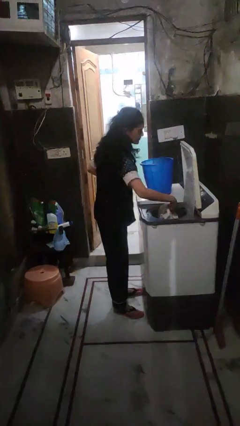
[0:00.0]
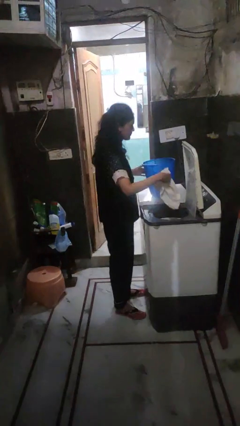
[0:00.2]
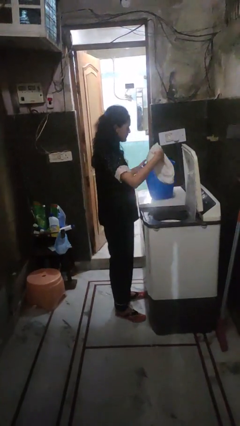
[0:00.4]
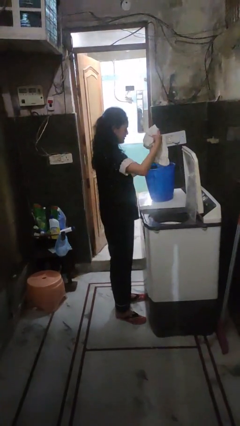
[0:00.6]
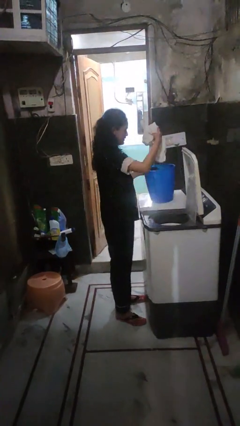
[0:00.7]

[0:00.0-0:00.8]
person unloads dryer

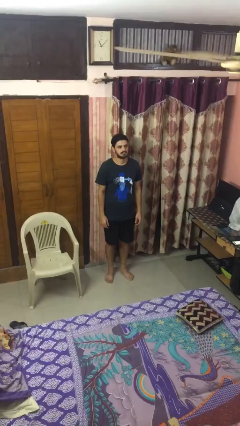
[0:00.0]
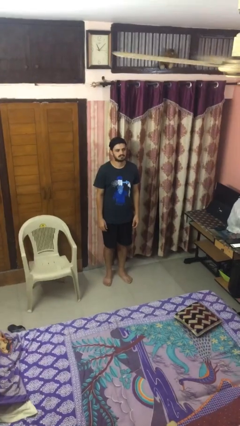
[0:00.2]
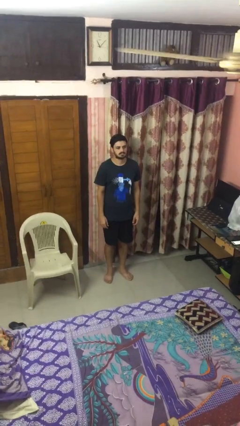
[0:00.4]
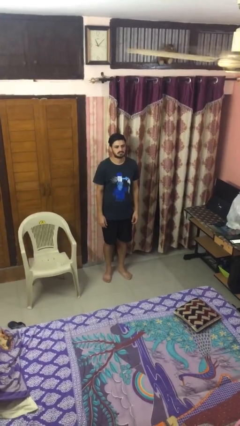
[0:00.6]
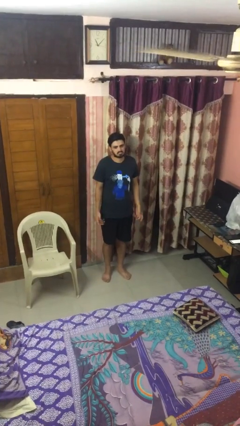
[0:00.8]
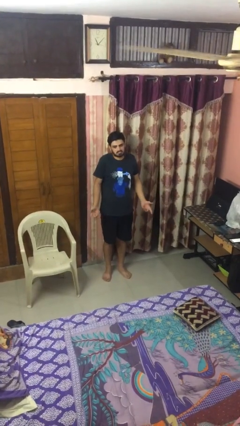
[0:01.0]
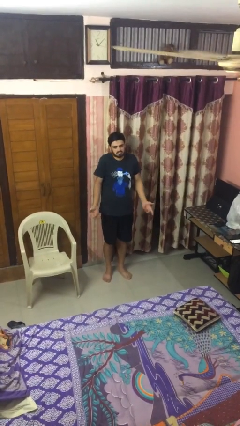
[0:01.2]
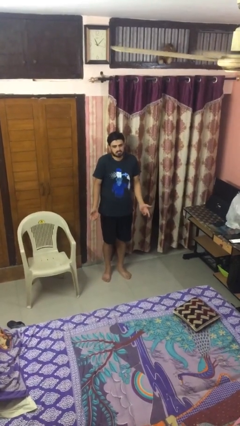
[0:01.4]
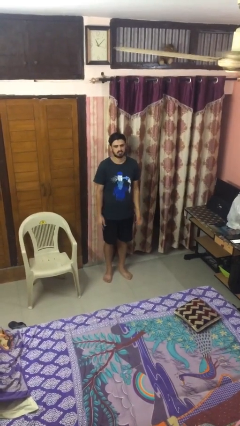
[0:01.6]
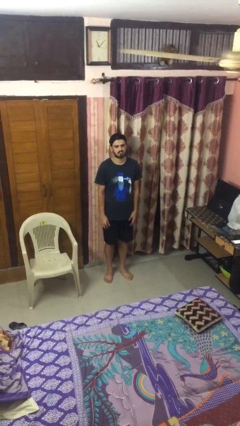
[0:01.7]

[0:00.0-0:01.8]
person shrugs

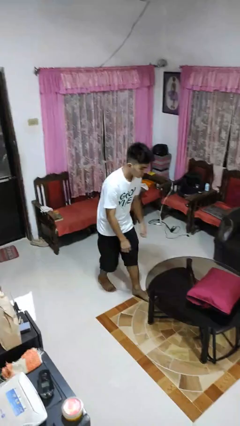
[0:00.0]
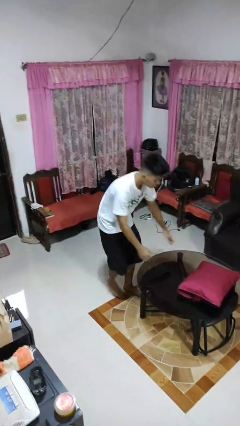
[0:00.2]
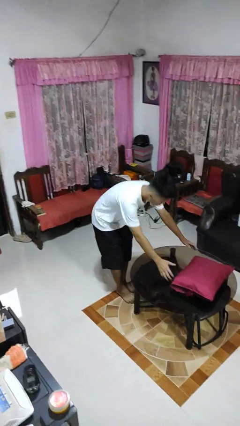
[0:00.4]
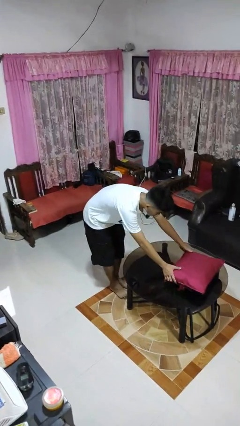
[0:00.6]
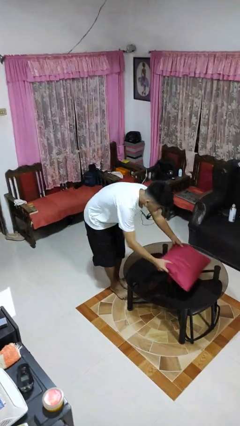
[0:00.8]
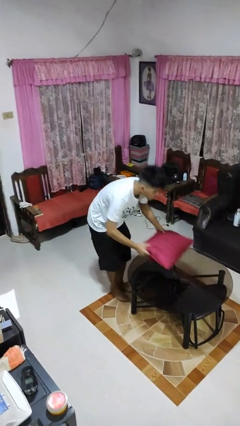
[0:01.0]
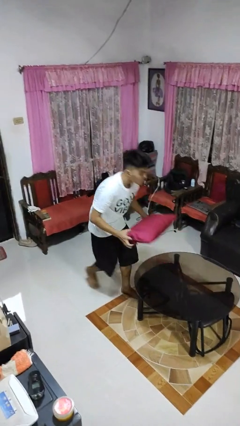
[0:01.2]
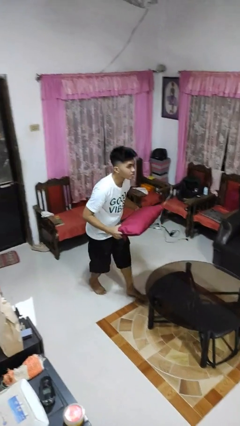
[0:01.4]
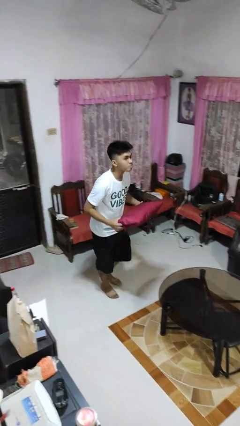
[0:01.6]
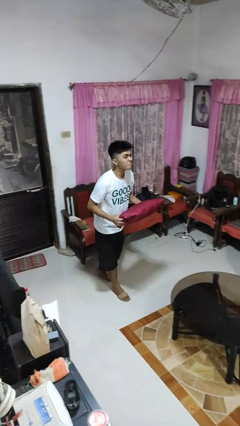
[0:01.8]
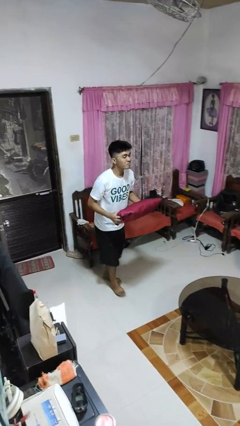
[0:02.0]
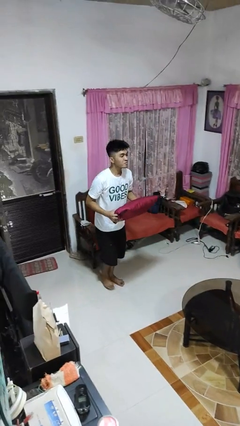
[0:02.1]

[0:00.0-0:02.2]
person picks up object from table

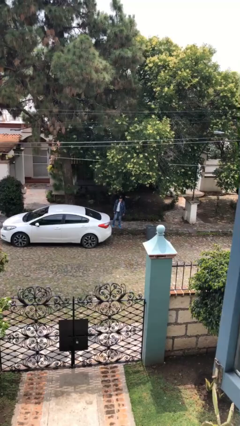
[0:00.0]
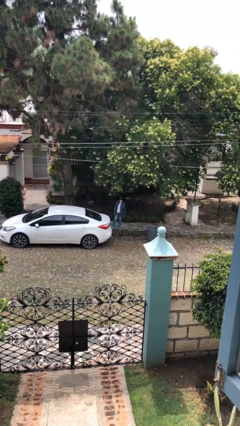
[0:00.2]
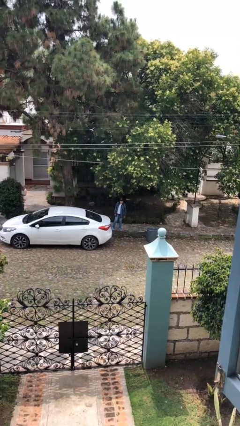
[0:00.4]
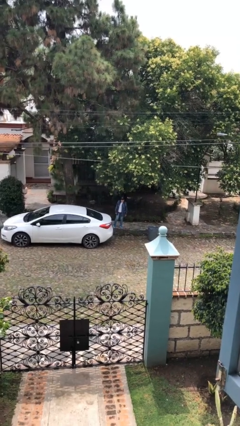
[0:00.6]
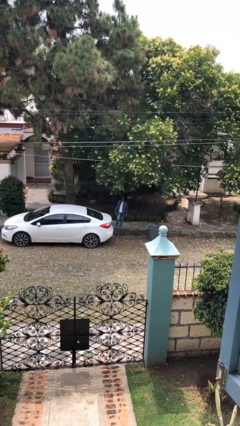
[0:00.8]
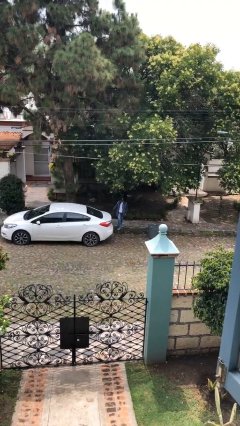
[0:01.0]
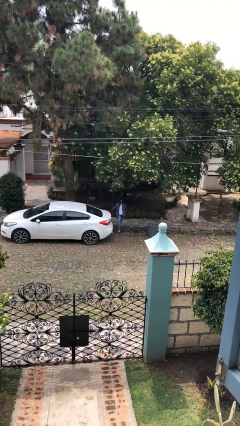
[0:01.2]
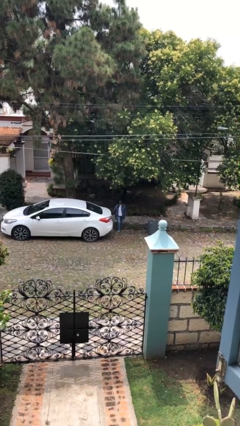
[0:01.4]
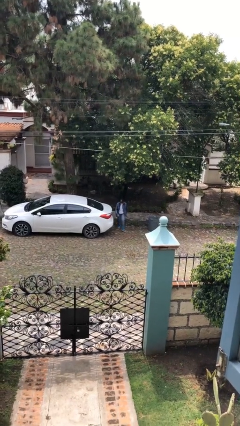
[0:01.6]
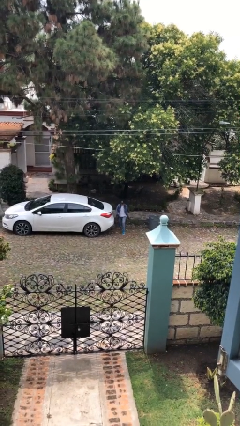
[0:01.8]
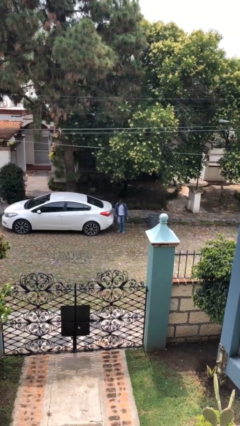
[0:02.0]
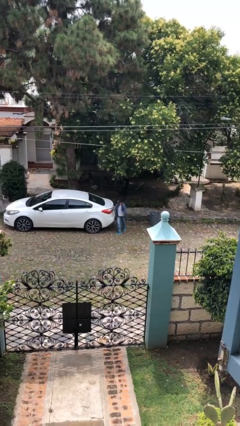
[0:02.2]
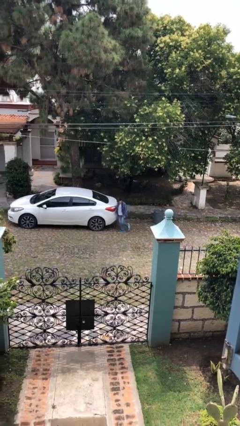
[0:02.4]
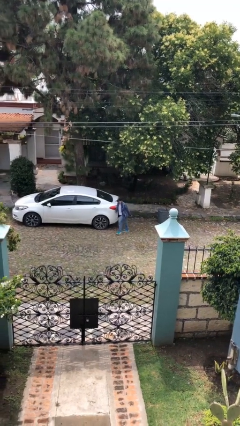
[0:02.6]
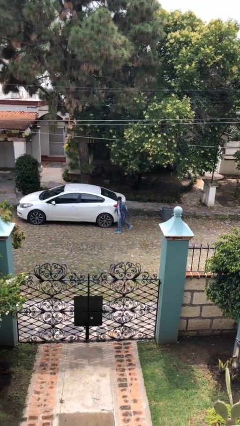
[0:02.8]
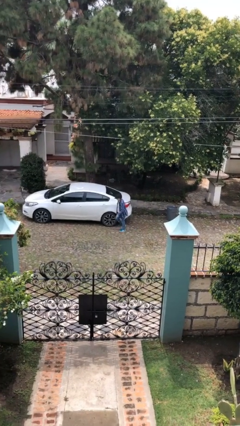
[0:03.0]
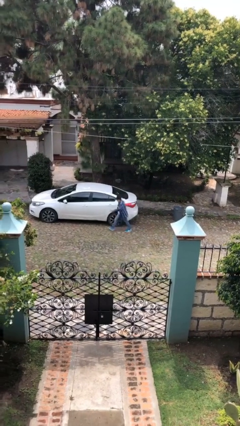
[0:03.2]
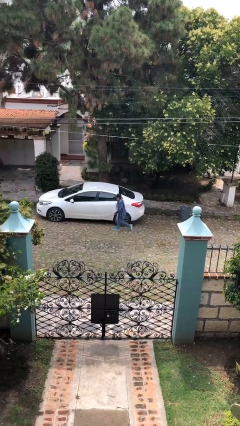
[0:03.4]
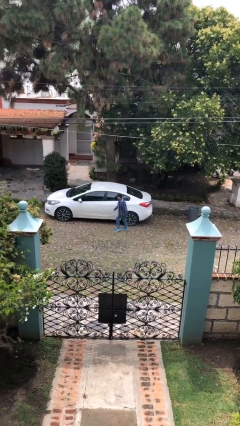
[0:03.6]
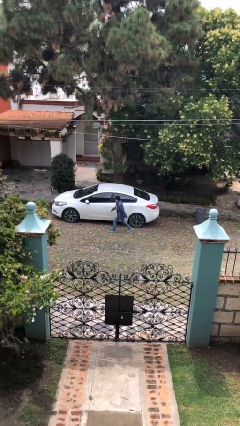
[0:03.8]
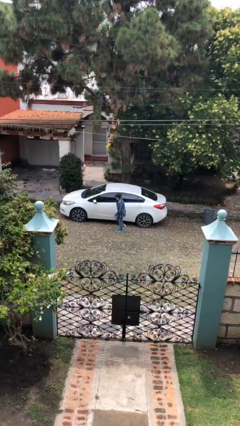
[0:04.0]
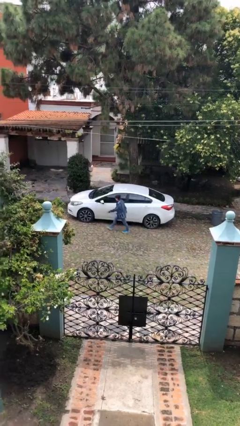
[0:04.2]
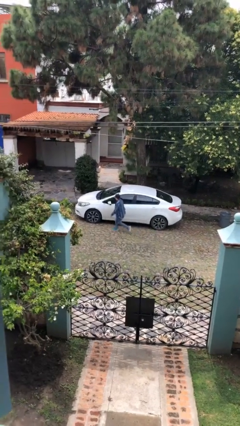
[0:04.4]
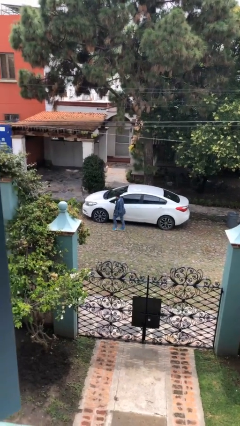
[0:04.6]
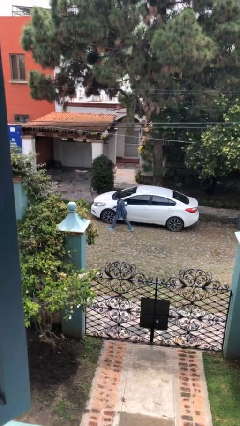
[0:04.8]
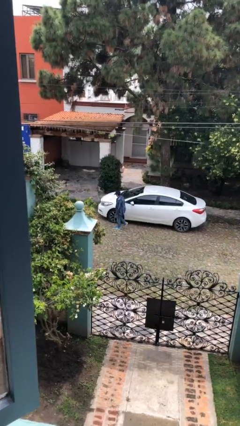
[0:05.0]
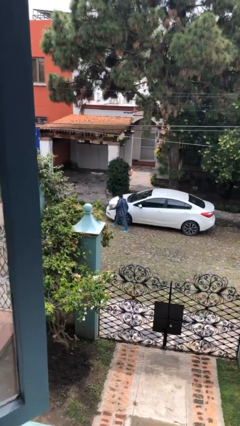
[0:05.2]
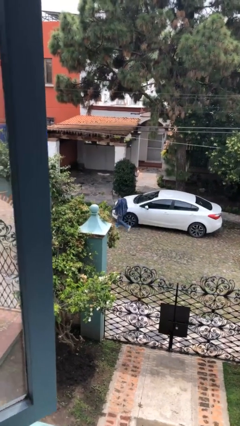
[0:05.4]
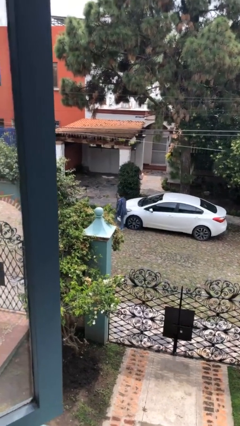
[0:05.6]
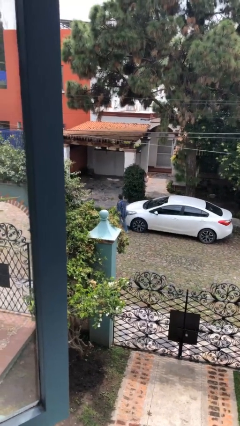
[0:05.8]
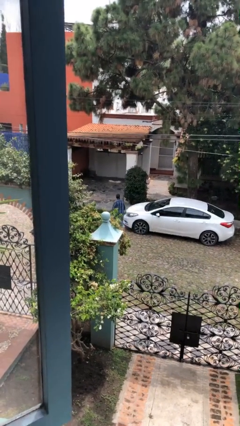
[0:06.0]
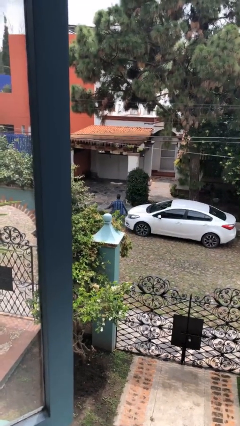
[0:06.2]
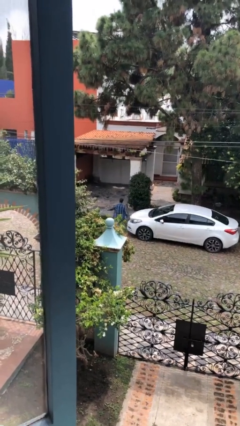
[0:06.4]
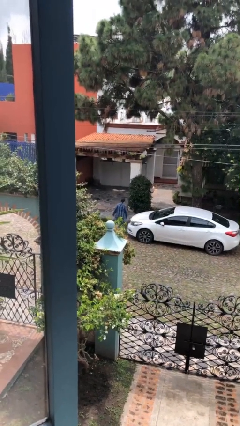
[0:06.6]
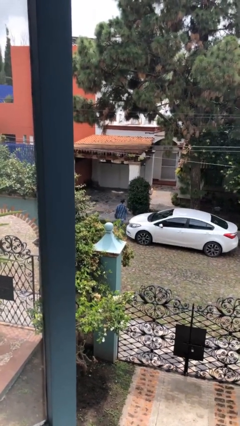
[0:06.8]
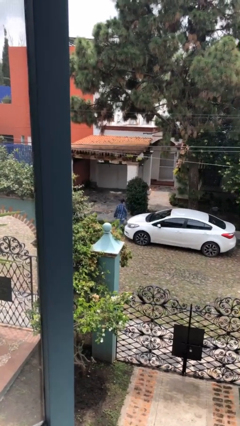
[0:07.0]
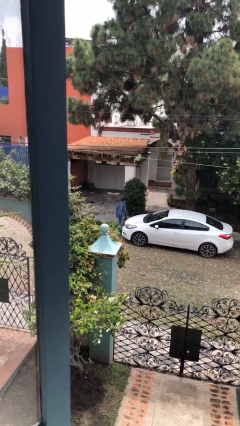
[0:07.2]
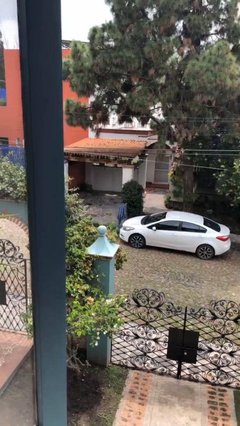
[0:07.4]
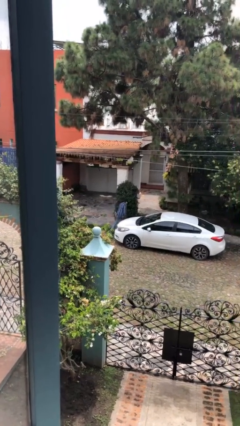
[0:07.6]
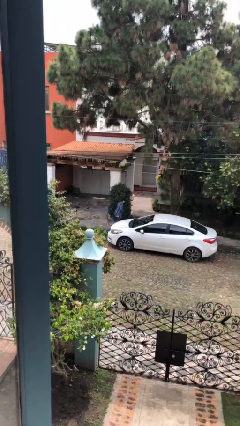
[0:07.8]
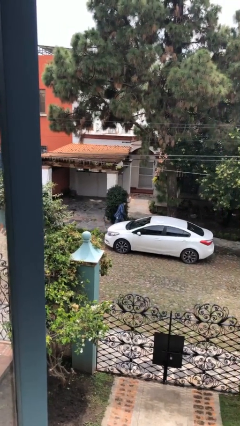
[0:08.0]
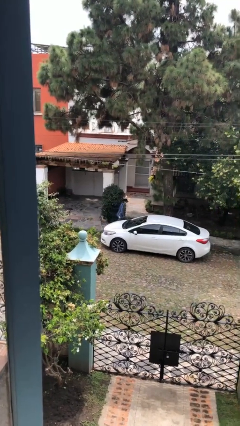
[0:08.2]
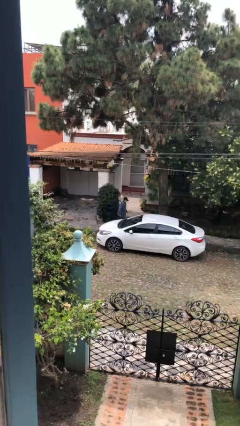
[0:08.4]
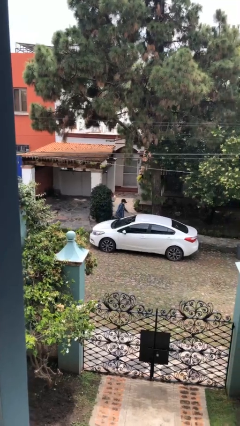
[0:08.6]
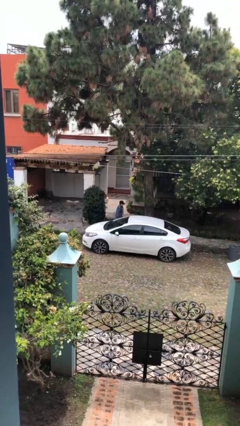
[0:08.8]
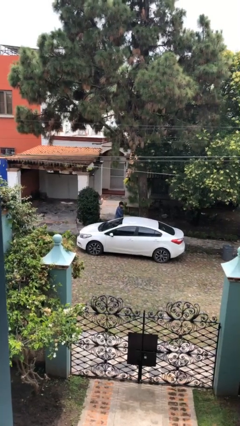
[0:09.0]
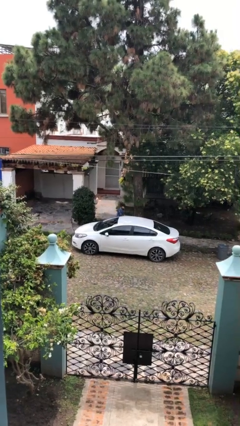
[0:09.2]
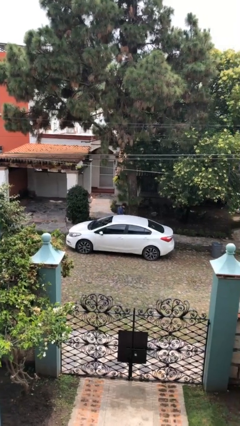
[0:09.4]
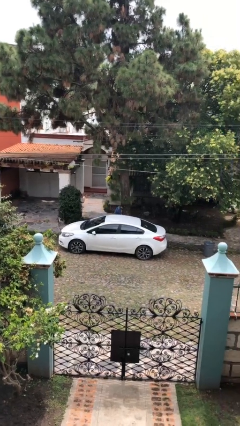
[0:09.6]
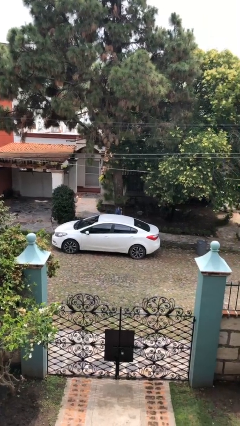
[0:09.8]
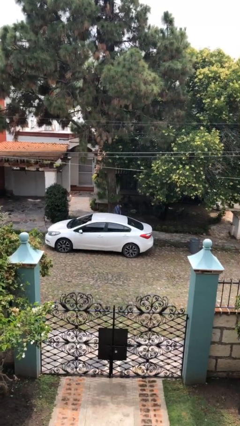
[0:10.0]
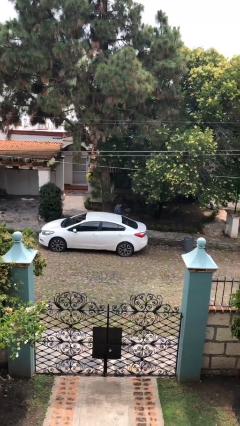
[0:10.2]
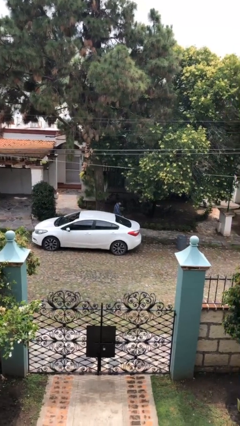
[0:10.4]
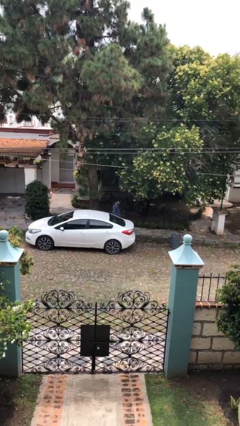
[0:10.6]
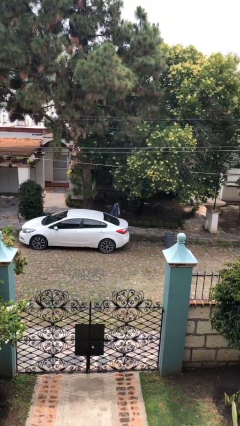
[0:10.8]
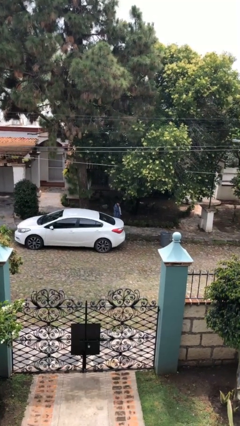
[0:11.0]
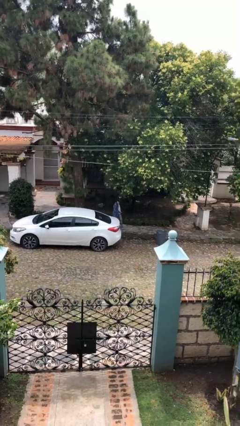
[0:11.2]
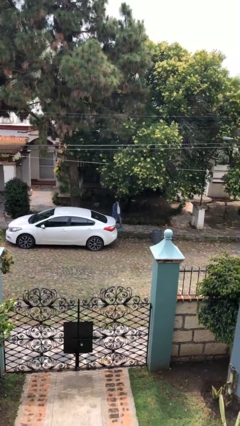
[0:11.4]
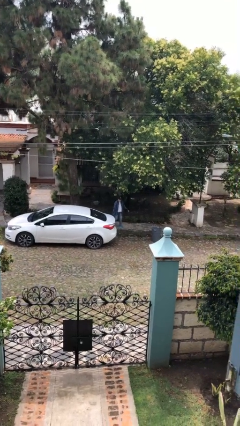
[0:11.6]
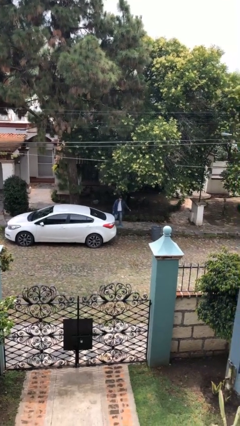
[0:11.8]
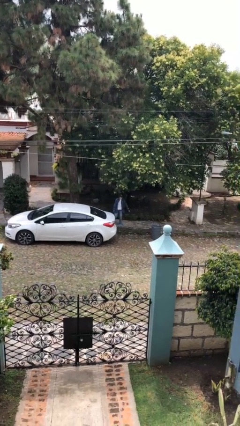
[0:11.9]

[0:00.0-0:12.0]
person walks around car

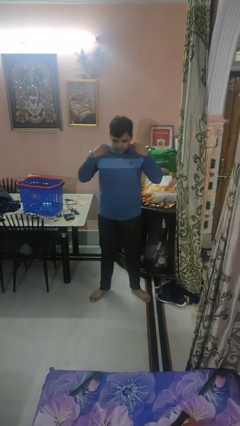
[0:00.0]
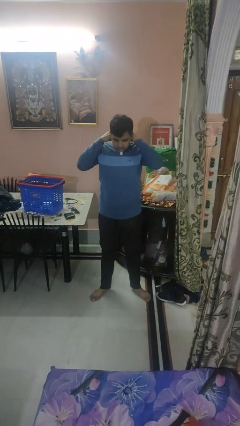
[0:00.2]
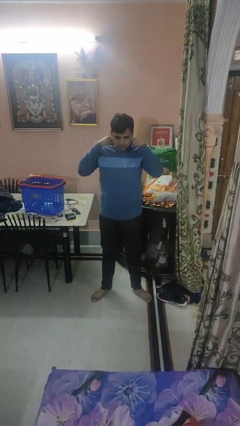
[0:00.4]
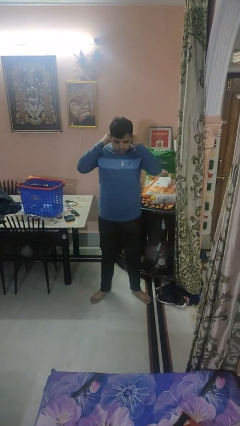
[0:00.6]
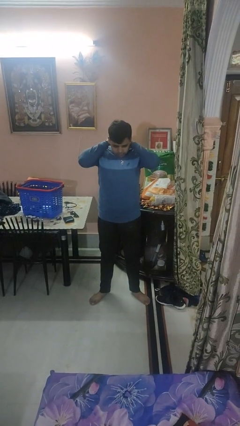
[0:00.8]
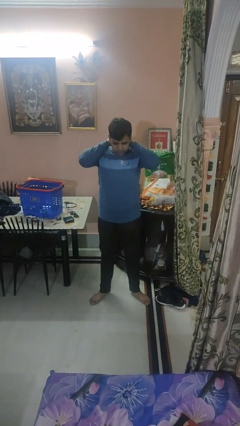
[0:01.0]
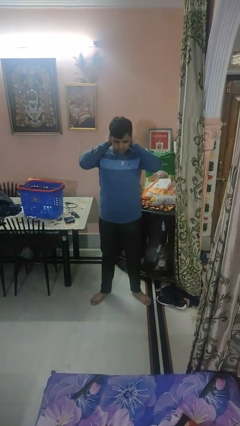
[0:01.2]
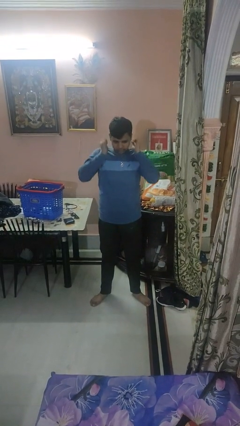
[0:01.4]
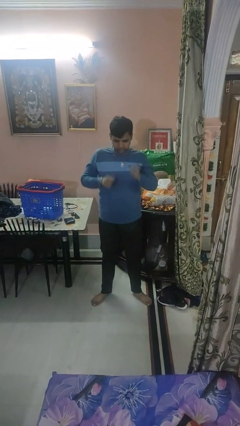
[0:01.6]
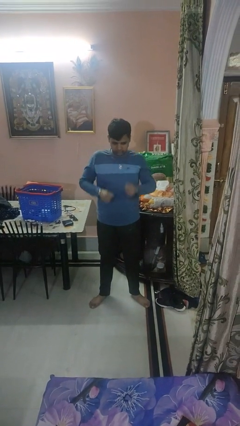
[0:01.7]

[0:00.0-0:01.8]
person puts on necklace
